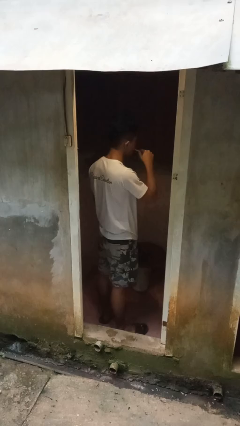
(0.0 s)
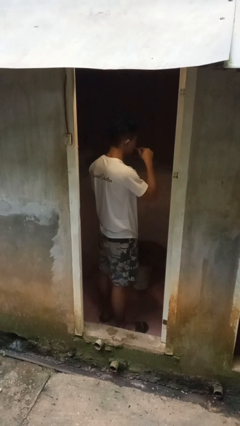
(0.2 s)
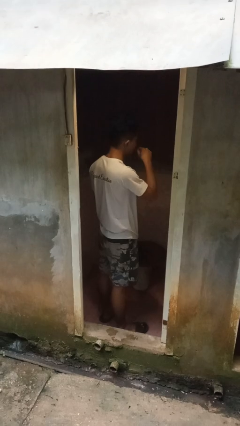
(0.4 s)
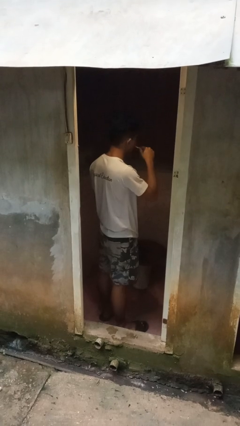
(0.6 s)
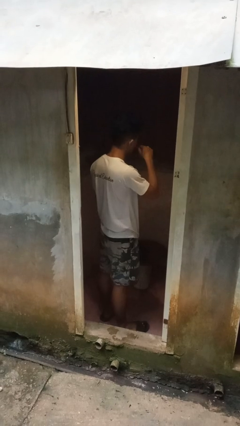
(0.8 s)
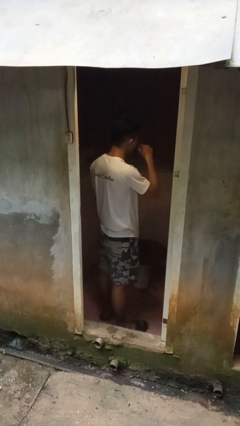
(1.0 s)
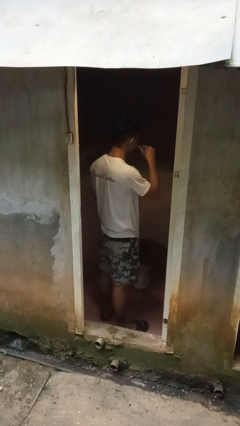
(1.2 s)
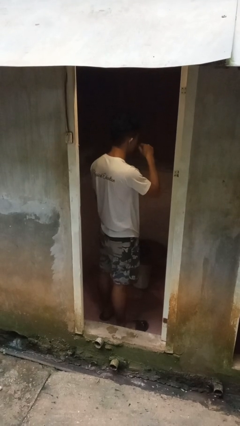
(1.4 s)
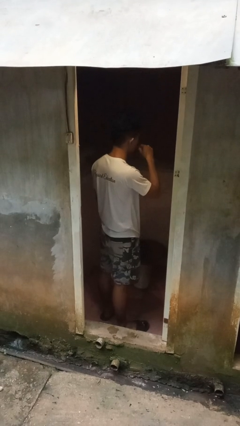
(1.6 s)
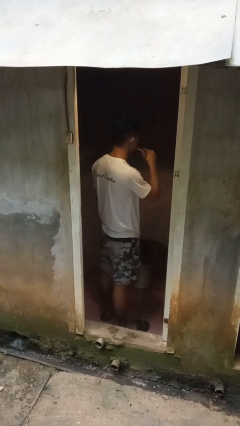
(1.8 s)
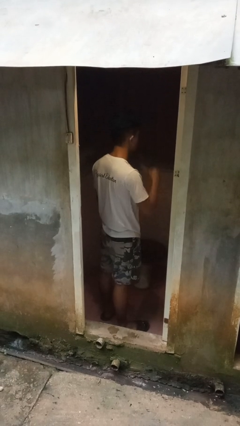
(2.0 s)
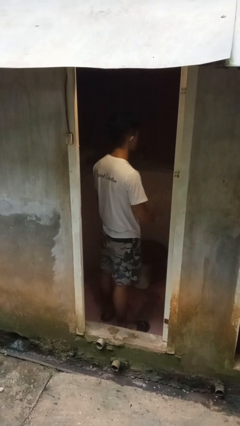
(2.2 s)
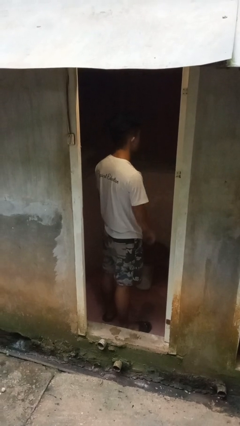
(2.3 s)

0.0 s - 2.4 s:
person brushes teeth

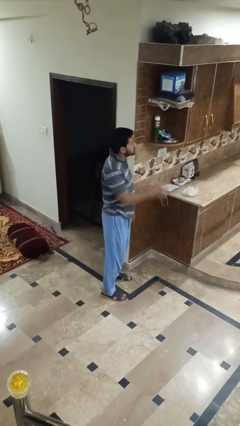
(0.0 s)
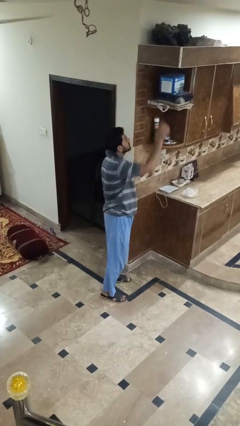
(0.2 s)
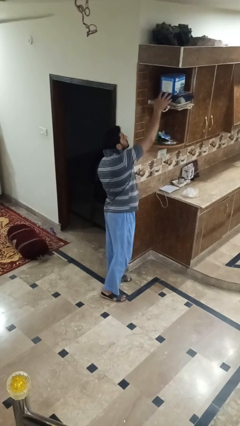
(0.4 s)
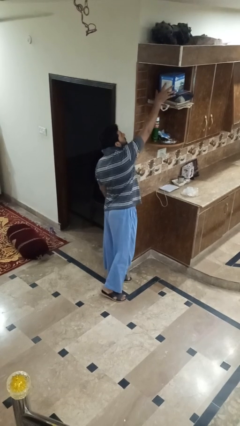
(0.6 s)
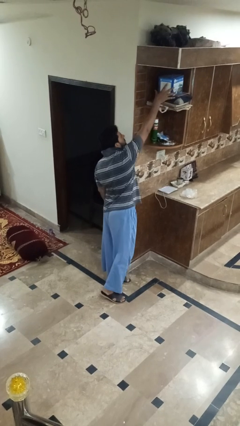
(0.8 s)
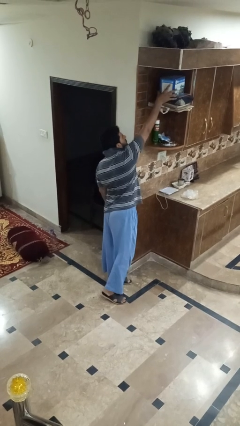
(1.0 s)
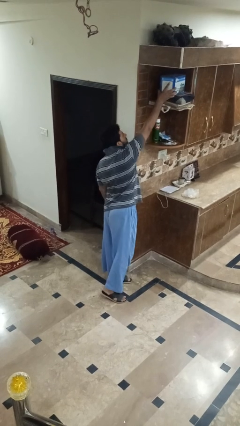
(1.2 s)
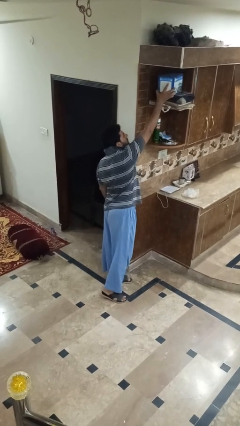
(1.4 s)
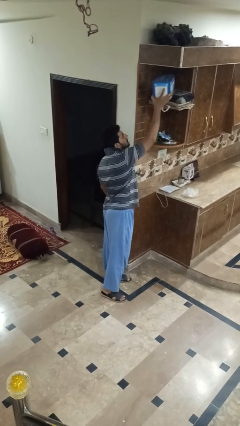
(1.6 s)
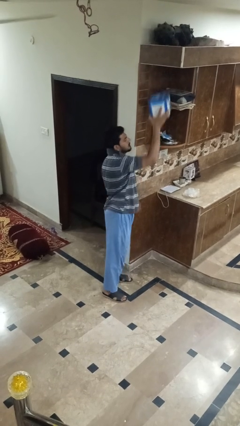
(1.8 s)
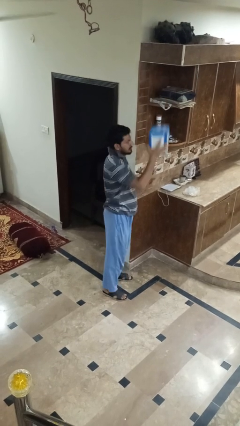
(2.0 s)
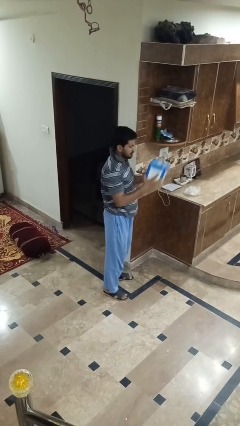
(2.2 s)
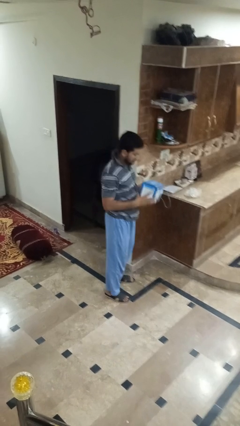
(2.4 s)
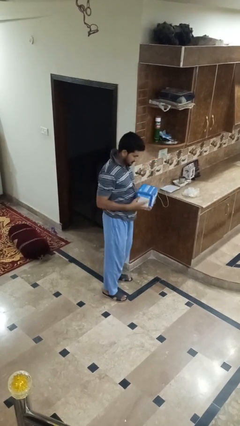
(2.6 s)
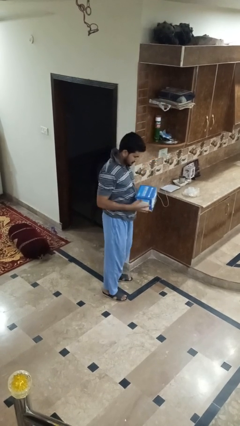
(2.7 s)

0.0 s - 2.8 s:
person puts down object on shelf

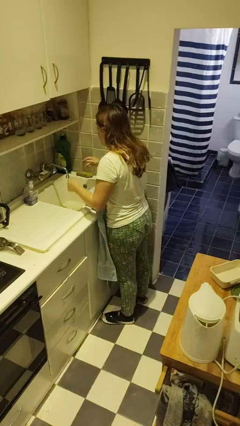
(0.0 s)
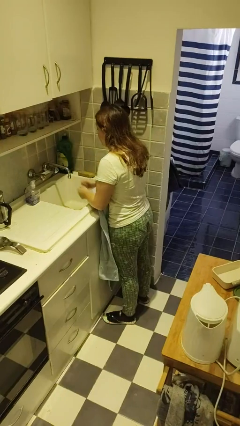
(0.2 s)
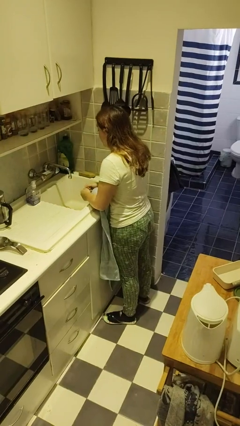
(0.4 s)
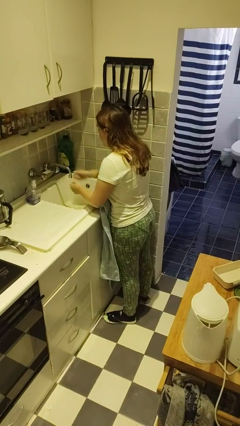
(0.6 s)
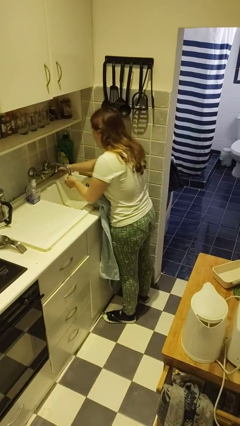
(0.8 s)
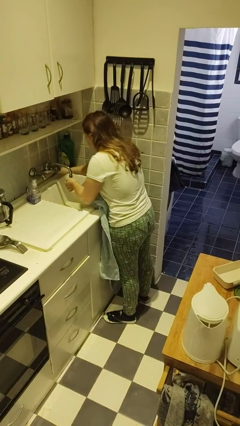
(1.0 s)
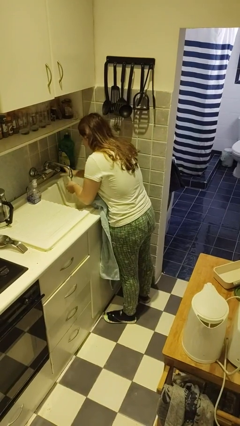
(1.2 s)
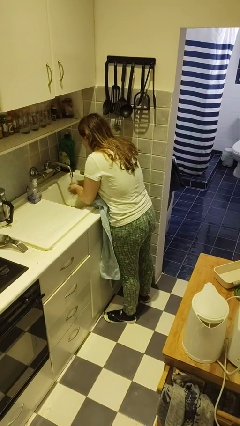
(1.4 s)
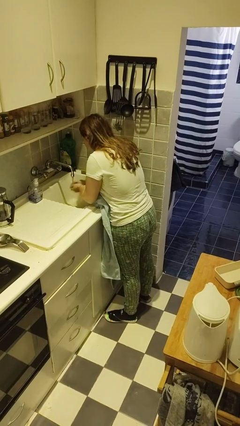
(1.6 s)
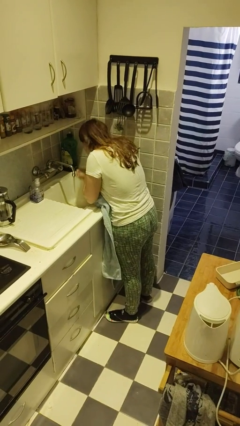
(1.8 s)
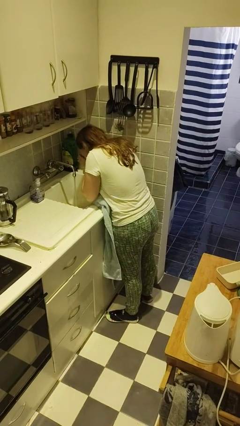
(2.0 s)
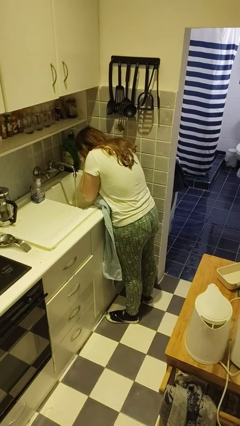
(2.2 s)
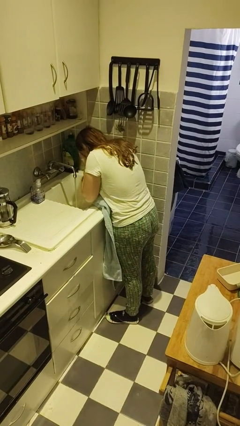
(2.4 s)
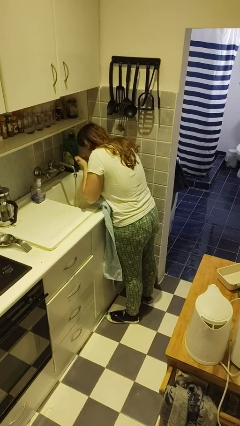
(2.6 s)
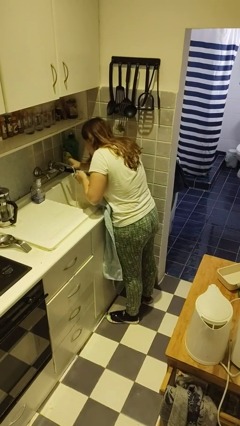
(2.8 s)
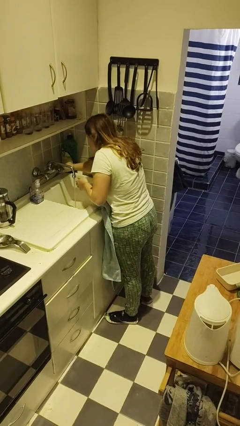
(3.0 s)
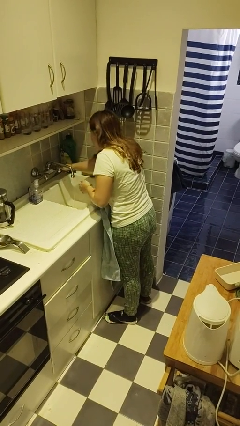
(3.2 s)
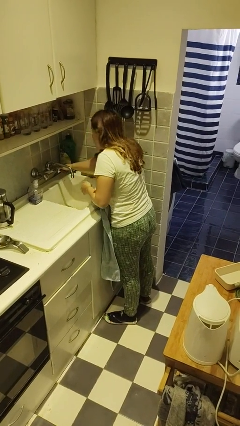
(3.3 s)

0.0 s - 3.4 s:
person washes face

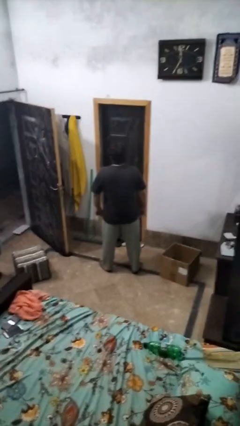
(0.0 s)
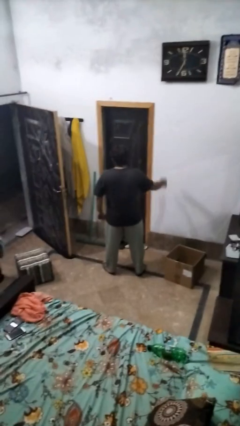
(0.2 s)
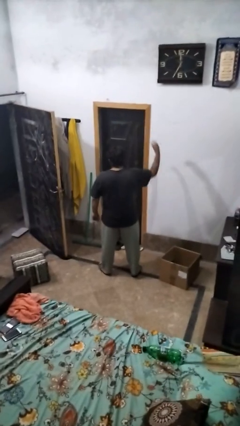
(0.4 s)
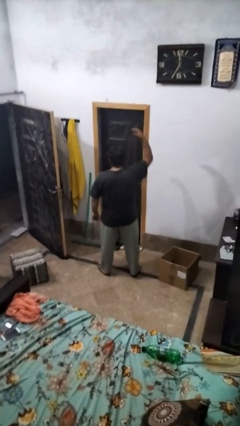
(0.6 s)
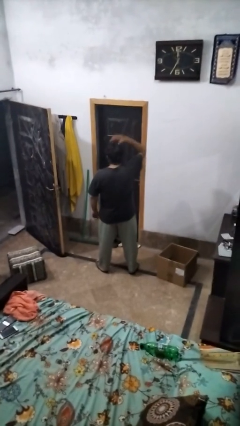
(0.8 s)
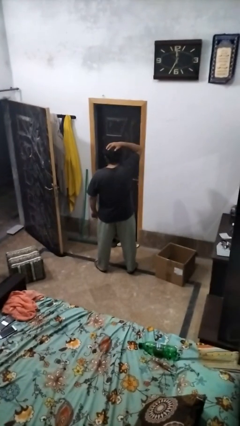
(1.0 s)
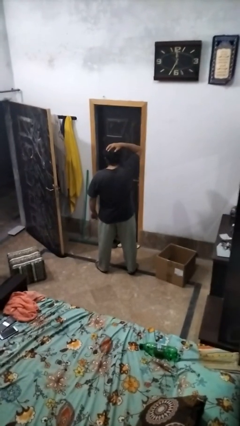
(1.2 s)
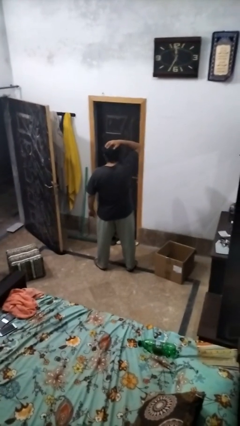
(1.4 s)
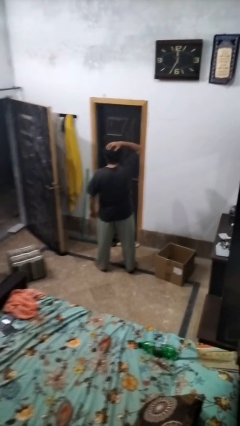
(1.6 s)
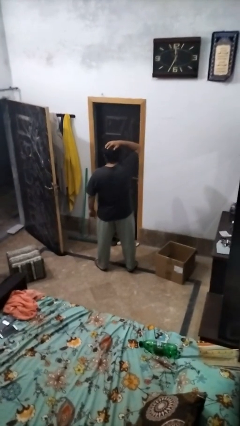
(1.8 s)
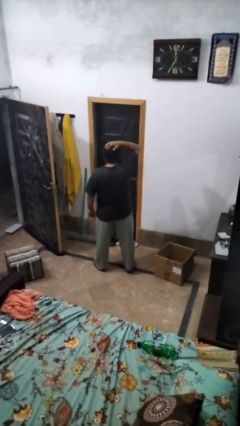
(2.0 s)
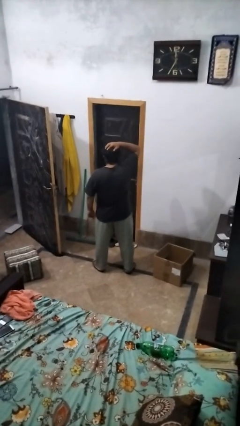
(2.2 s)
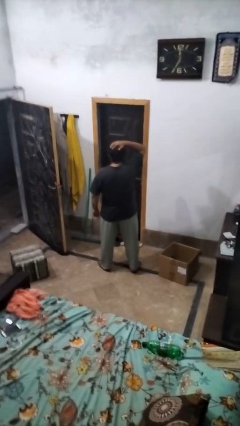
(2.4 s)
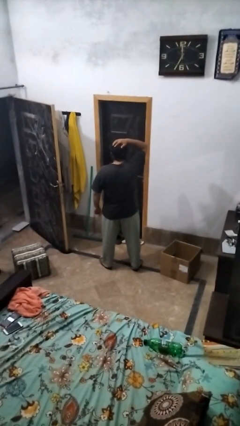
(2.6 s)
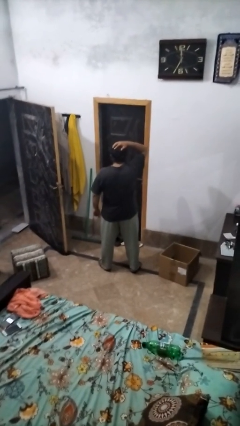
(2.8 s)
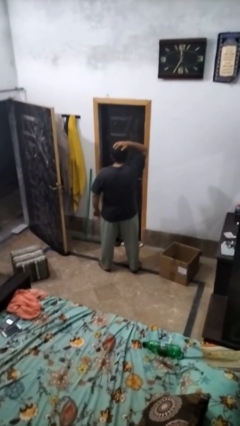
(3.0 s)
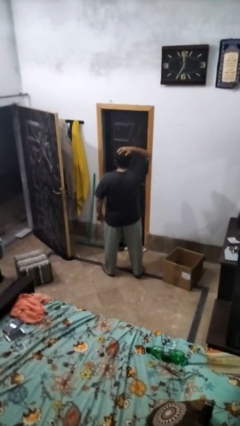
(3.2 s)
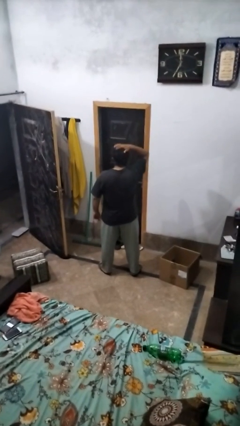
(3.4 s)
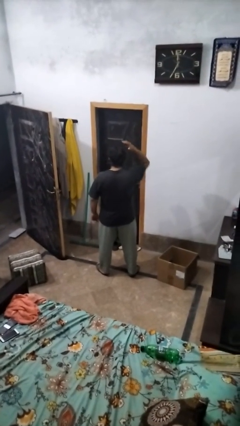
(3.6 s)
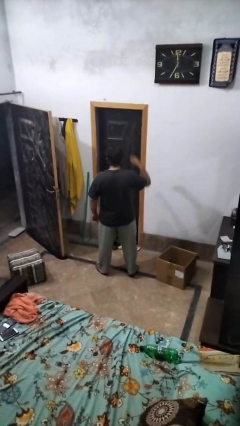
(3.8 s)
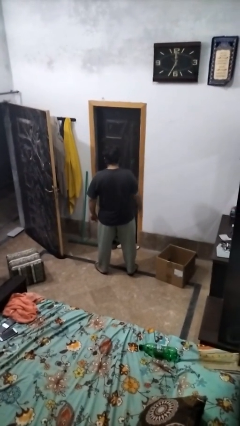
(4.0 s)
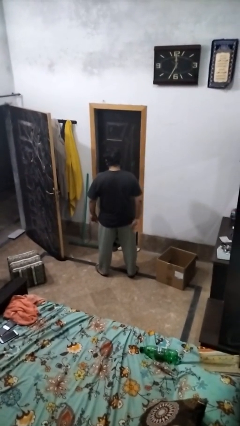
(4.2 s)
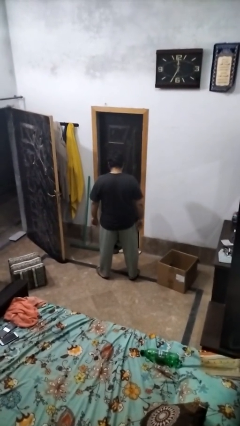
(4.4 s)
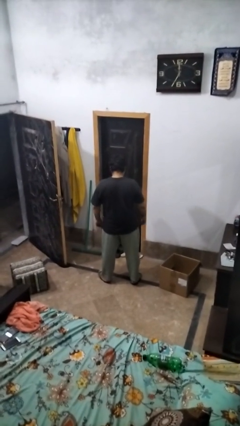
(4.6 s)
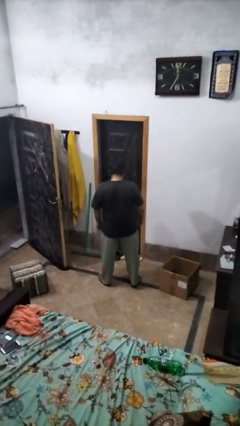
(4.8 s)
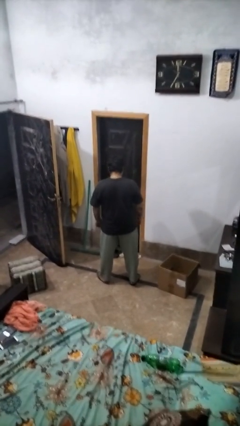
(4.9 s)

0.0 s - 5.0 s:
person pats head

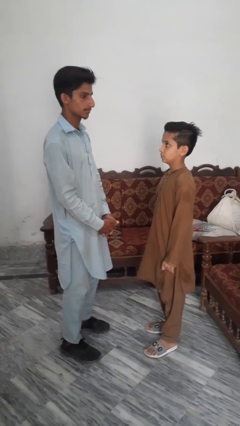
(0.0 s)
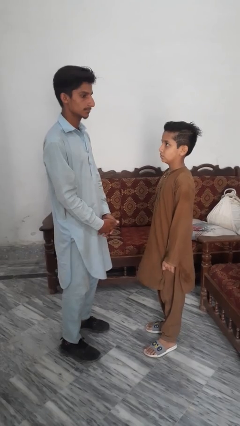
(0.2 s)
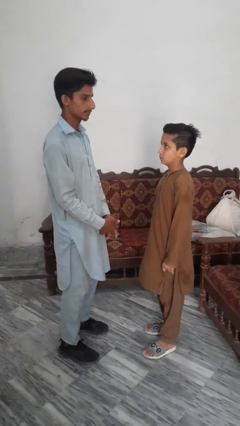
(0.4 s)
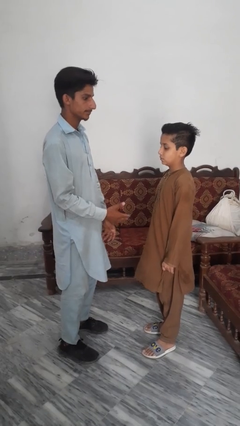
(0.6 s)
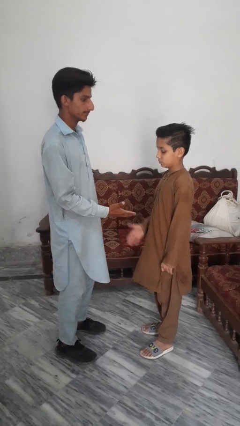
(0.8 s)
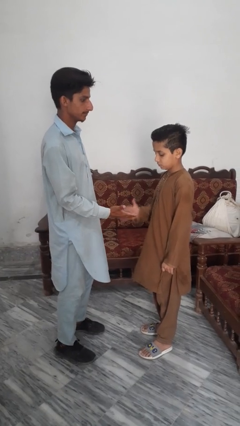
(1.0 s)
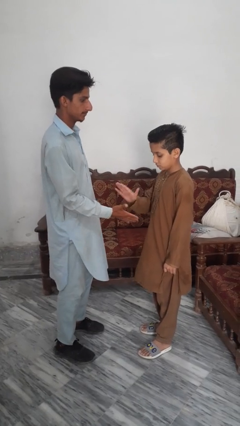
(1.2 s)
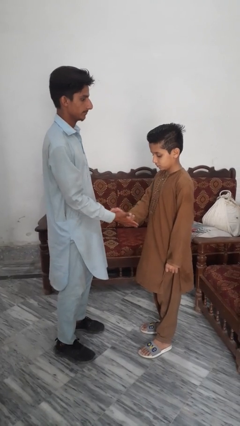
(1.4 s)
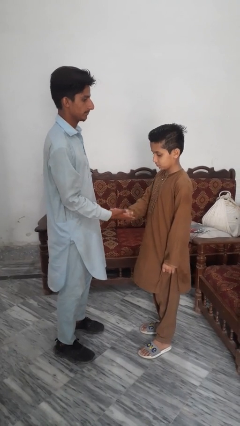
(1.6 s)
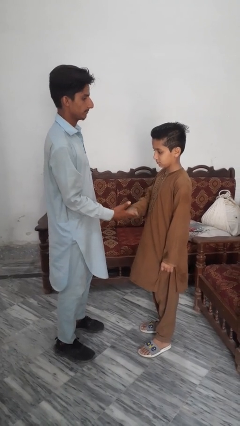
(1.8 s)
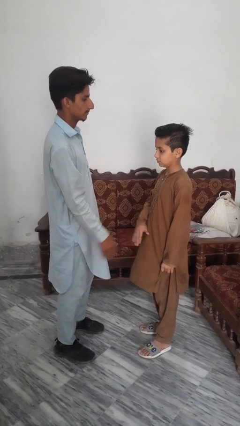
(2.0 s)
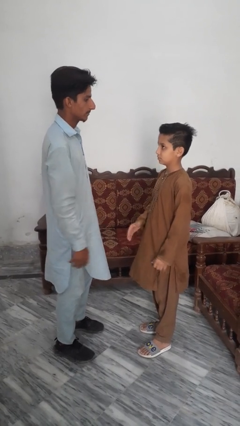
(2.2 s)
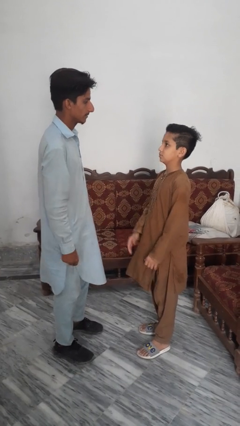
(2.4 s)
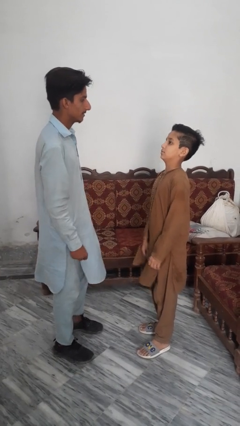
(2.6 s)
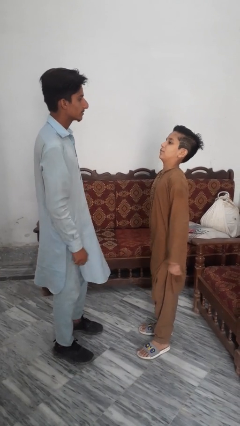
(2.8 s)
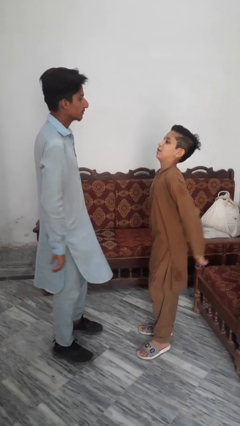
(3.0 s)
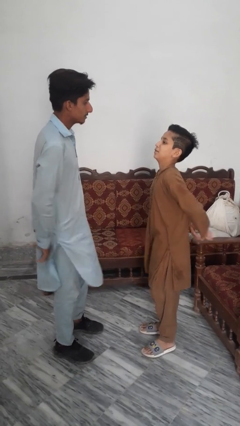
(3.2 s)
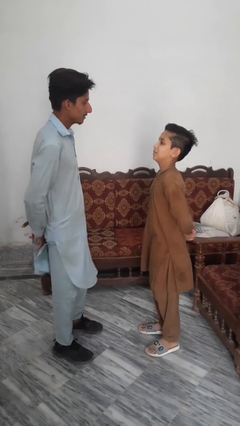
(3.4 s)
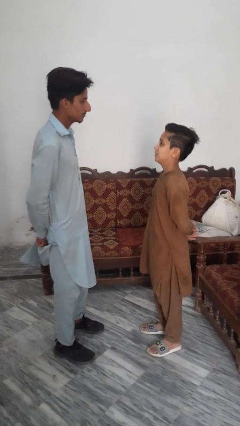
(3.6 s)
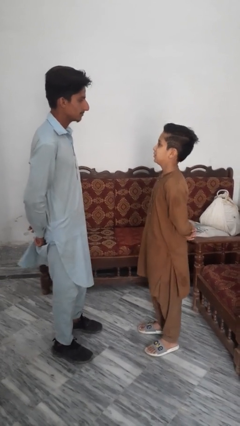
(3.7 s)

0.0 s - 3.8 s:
person highfives hand

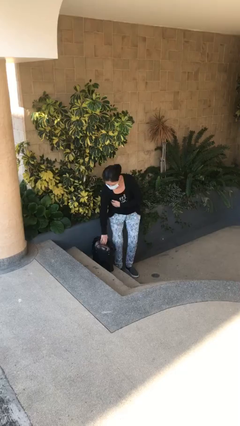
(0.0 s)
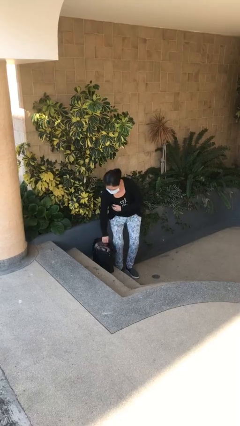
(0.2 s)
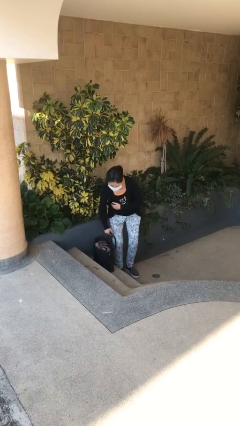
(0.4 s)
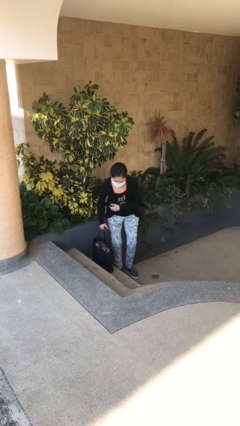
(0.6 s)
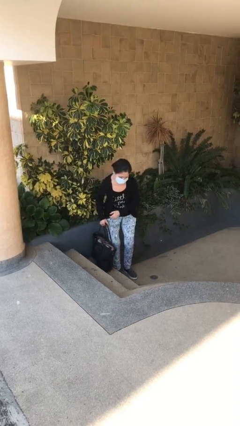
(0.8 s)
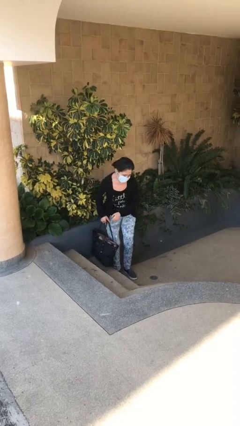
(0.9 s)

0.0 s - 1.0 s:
person picks up object from floor
